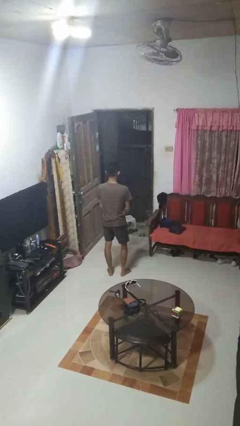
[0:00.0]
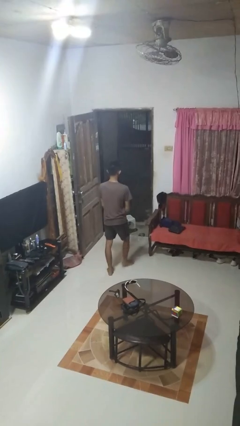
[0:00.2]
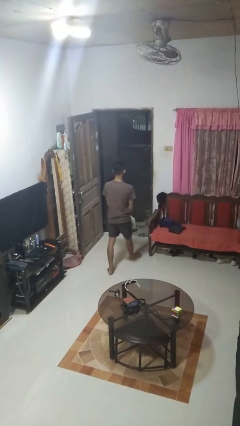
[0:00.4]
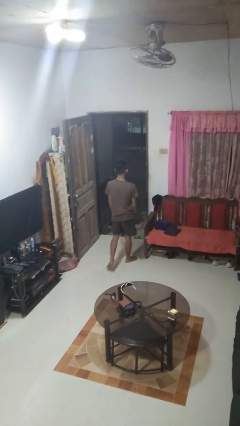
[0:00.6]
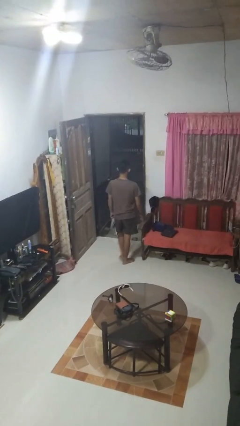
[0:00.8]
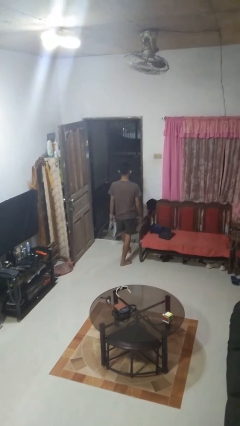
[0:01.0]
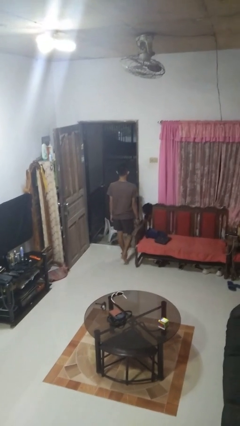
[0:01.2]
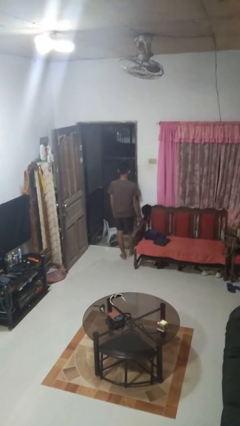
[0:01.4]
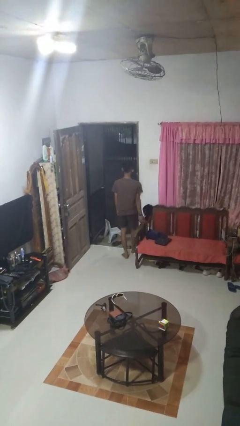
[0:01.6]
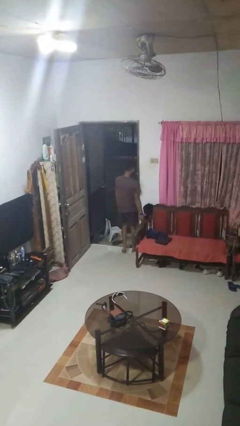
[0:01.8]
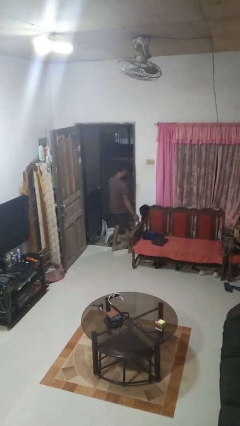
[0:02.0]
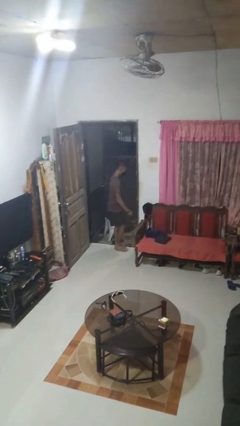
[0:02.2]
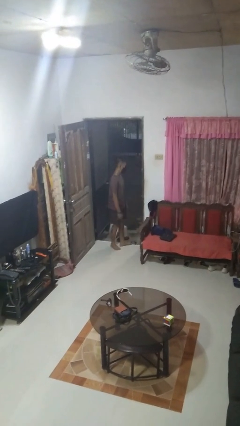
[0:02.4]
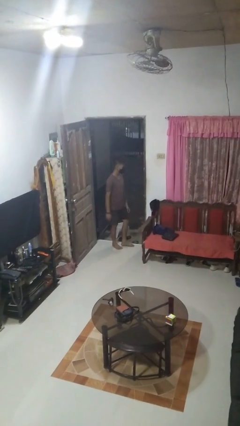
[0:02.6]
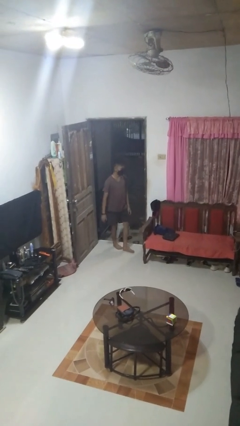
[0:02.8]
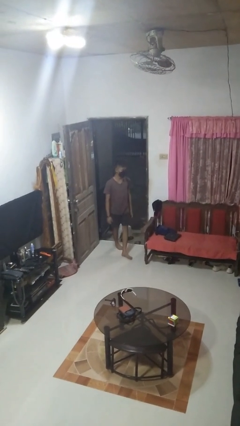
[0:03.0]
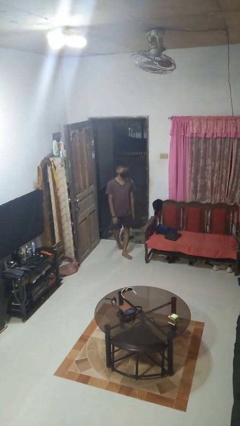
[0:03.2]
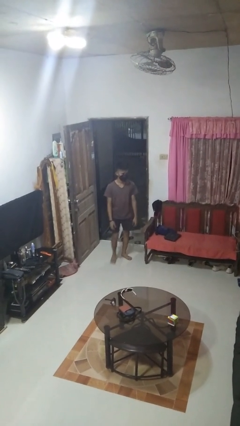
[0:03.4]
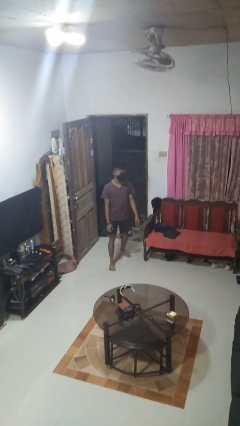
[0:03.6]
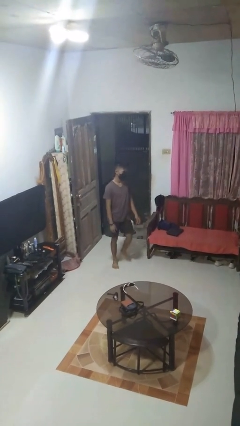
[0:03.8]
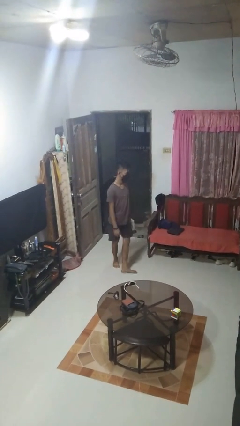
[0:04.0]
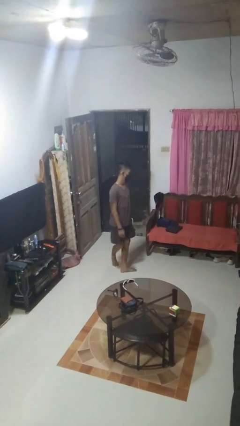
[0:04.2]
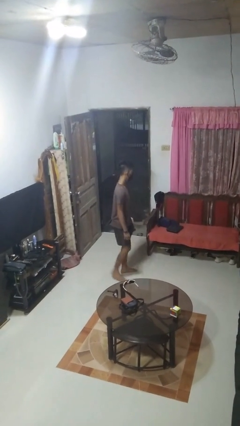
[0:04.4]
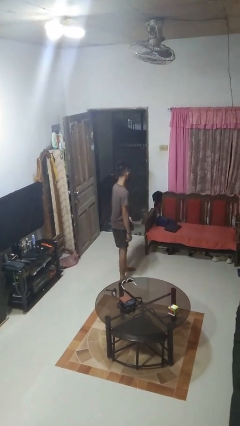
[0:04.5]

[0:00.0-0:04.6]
person bumps into wall

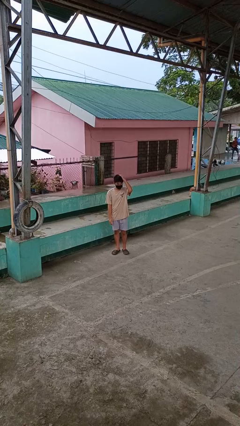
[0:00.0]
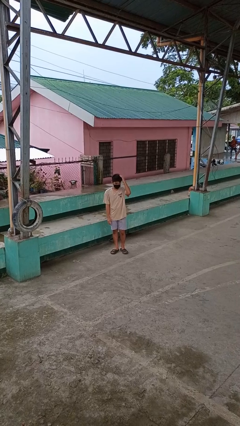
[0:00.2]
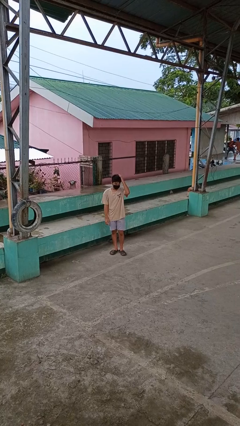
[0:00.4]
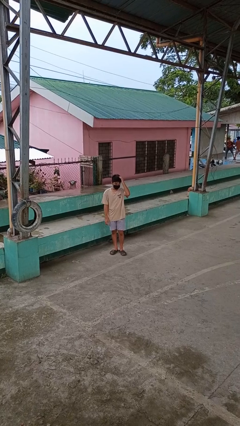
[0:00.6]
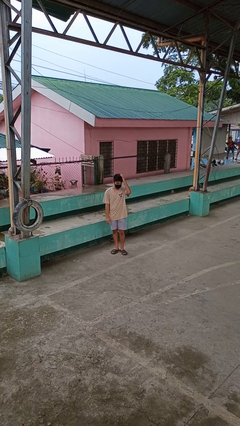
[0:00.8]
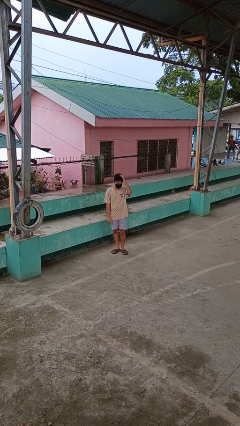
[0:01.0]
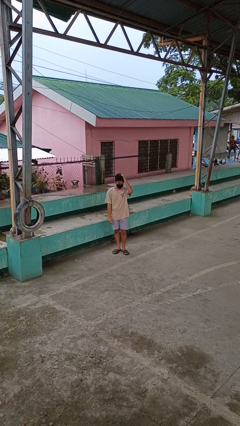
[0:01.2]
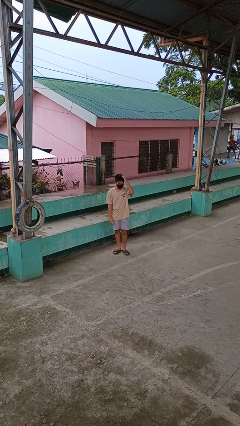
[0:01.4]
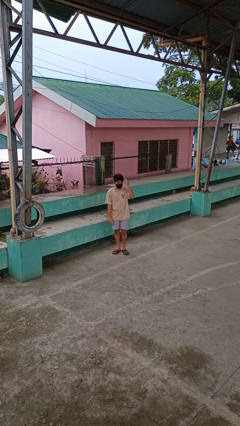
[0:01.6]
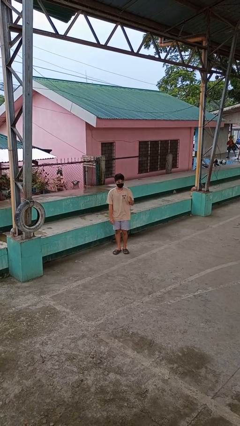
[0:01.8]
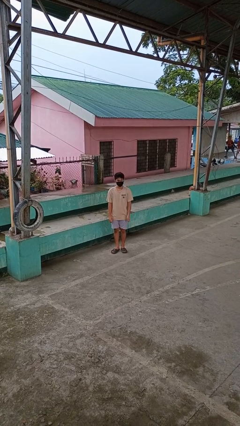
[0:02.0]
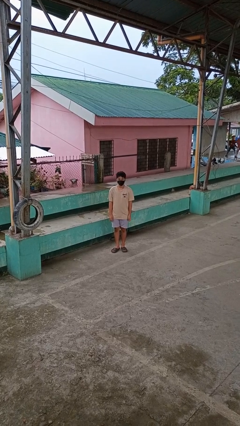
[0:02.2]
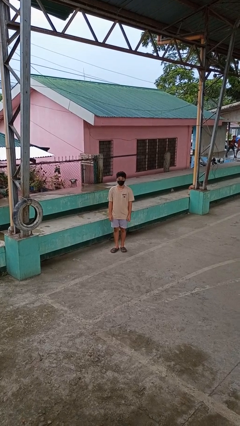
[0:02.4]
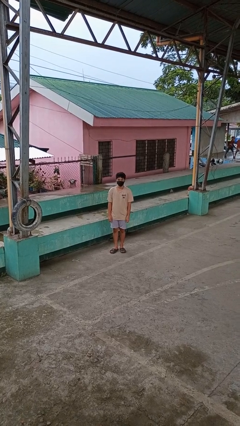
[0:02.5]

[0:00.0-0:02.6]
person pats head

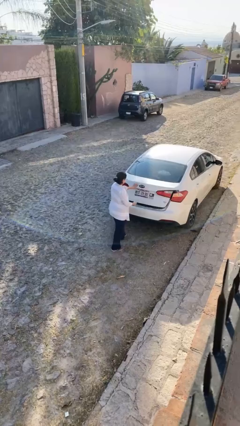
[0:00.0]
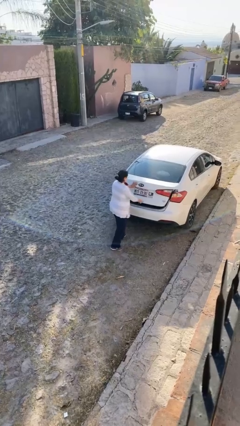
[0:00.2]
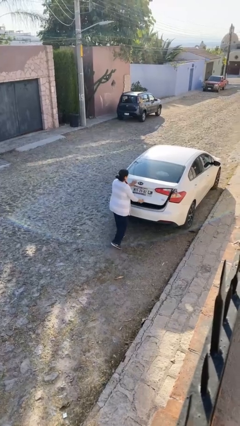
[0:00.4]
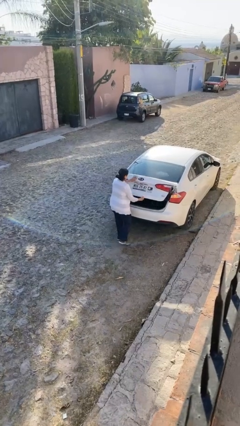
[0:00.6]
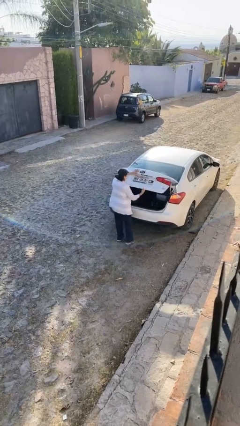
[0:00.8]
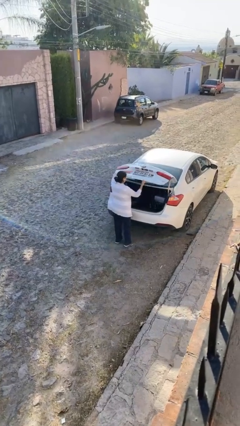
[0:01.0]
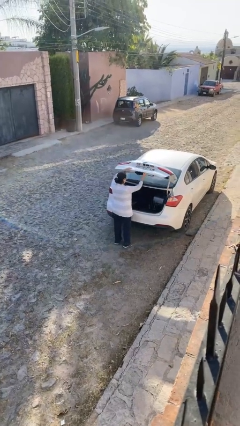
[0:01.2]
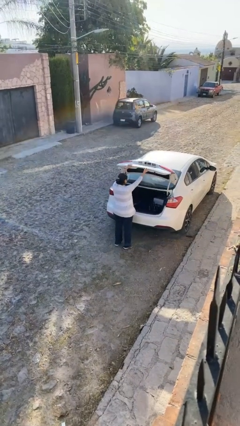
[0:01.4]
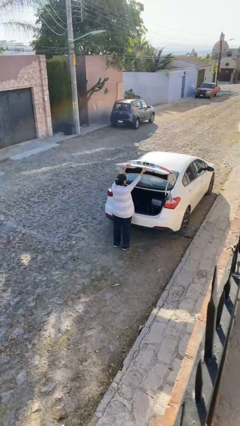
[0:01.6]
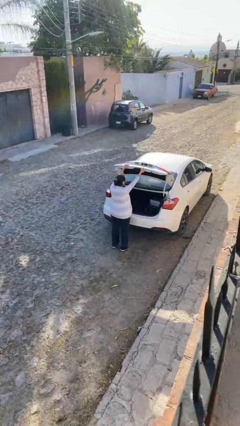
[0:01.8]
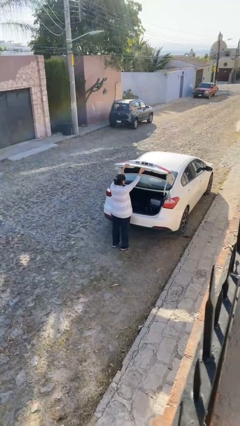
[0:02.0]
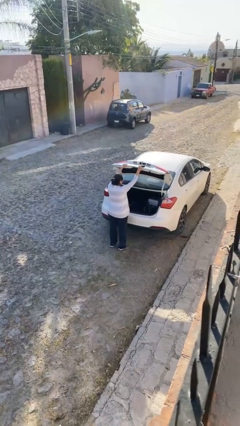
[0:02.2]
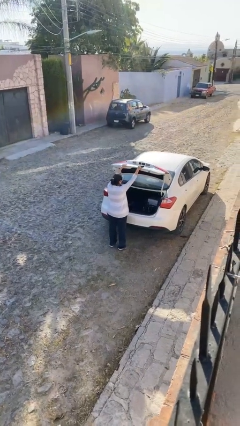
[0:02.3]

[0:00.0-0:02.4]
person opens car trunk

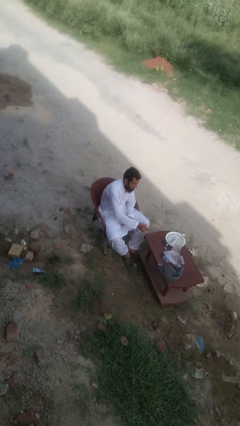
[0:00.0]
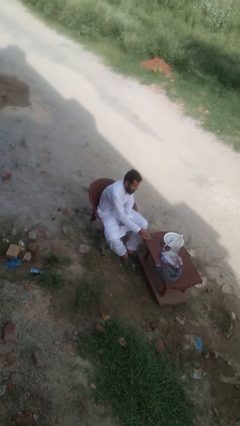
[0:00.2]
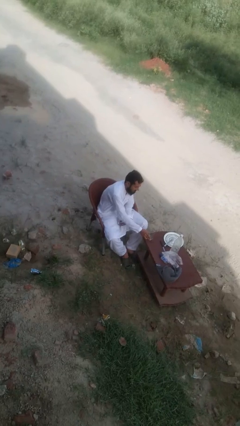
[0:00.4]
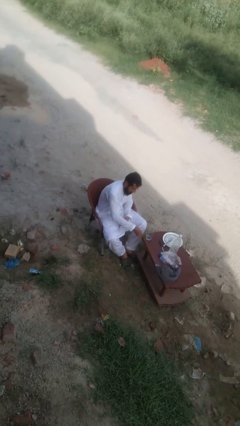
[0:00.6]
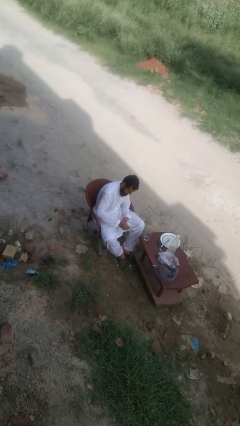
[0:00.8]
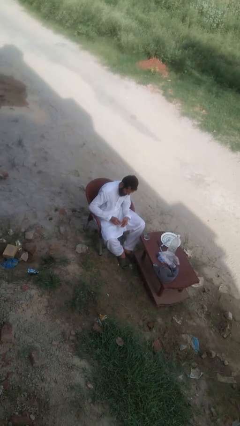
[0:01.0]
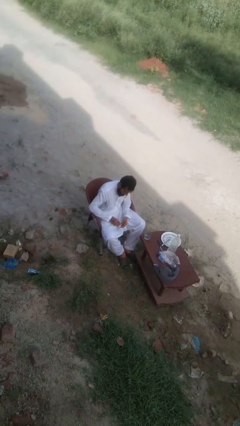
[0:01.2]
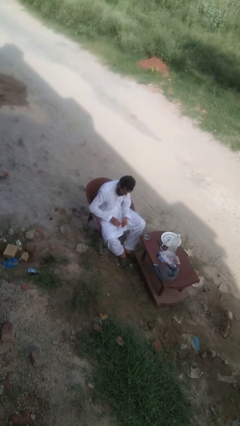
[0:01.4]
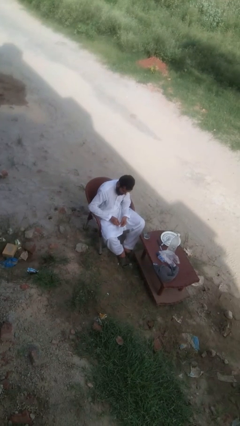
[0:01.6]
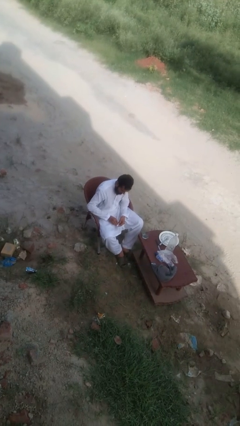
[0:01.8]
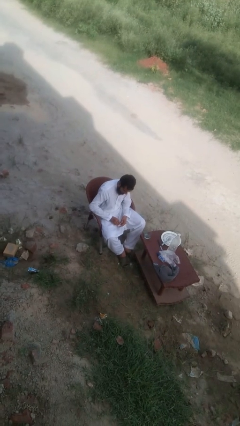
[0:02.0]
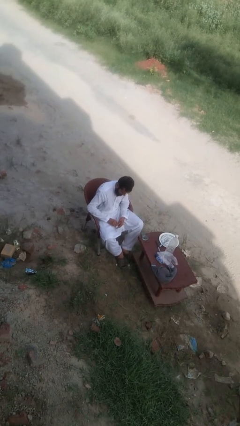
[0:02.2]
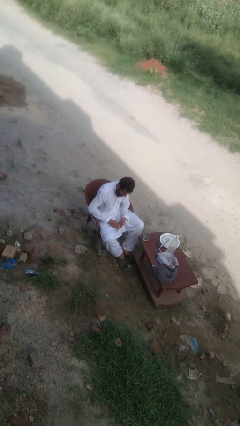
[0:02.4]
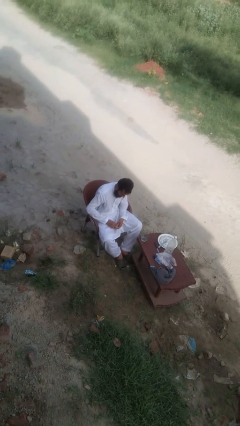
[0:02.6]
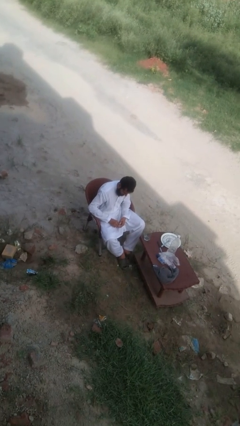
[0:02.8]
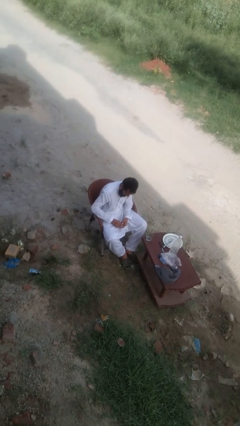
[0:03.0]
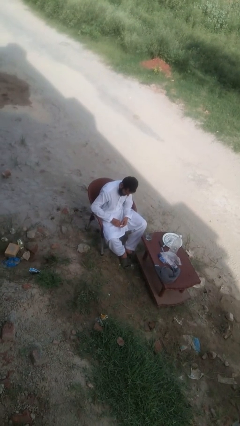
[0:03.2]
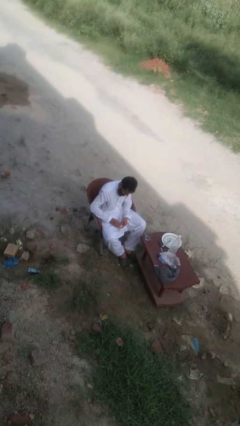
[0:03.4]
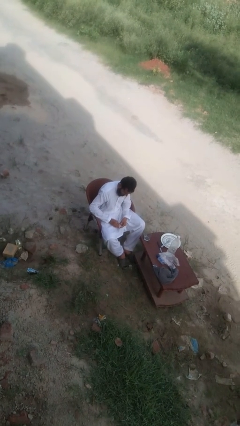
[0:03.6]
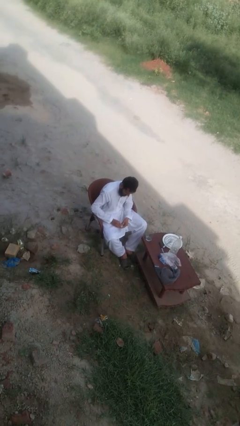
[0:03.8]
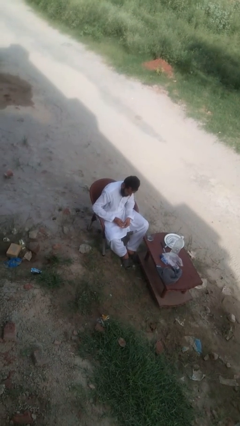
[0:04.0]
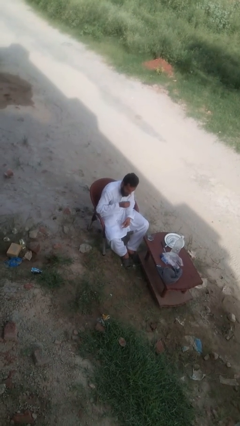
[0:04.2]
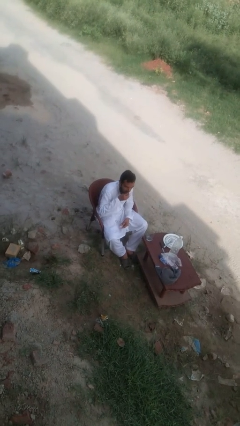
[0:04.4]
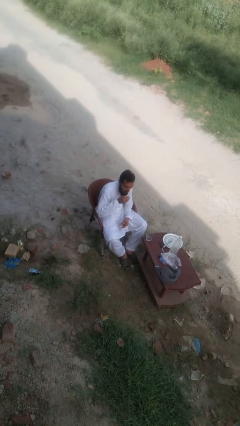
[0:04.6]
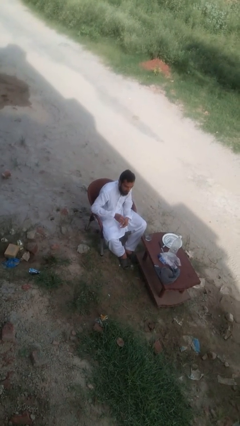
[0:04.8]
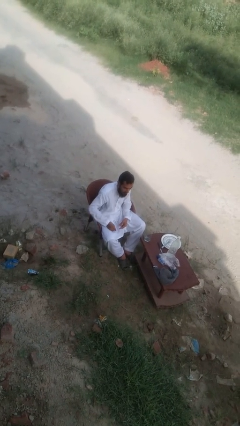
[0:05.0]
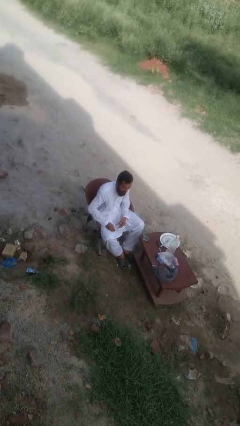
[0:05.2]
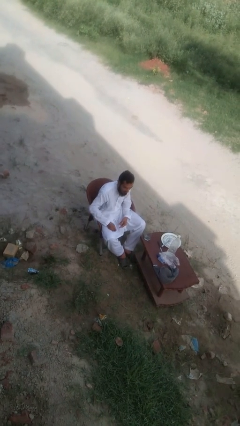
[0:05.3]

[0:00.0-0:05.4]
person takes medicine pills

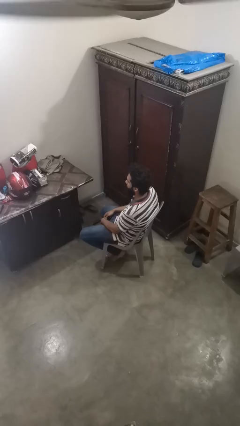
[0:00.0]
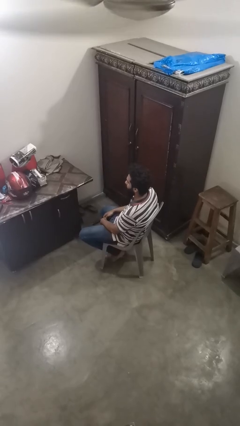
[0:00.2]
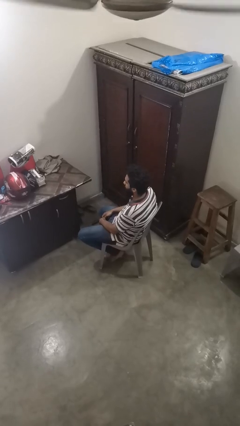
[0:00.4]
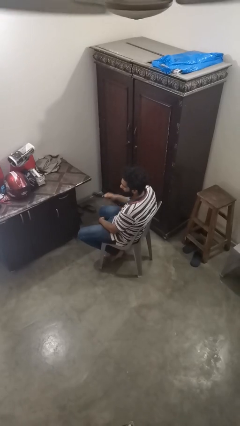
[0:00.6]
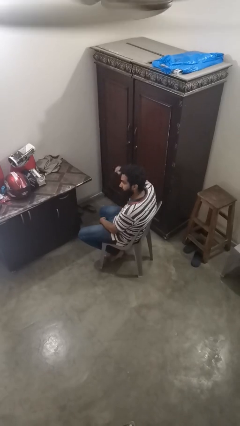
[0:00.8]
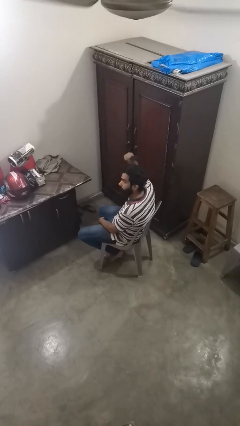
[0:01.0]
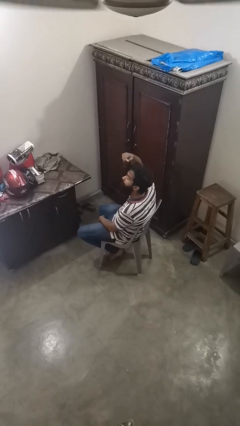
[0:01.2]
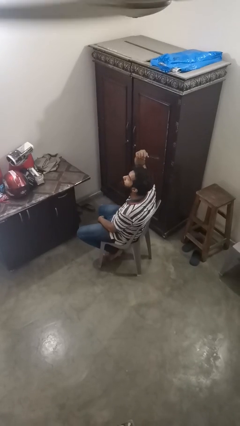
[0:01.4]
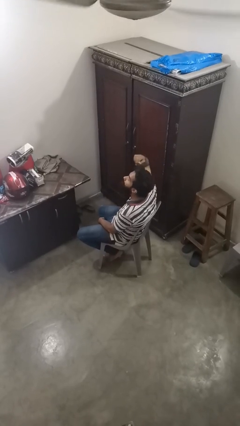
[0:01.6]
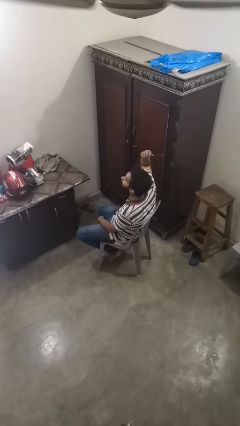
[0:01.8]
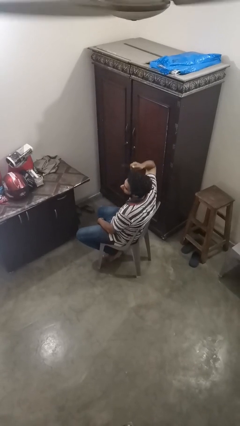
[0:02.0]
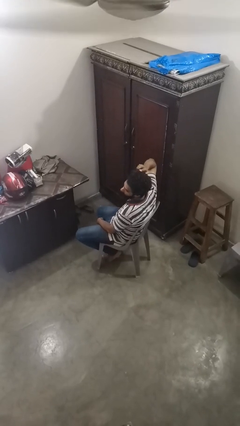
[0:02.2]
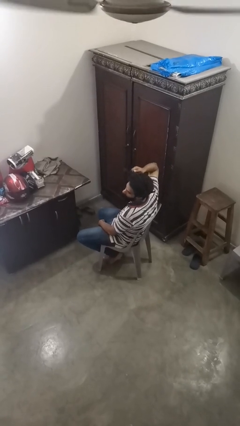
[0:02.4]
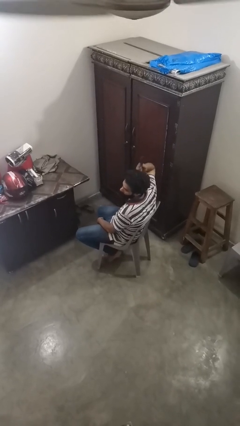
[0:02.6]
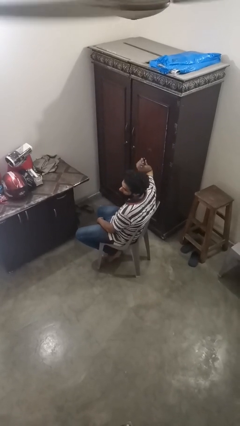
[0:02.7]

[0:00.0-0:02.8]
person brushes hair
